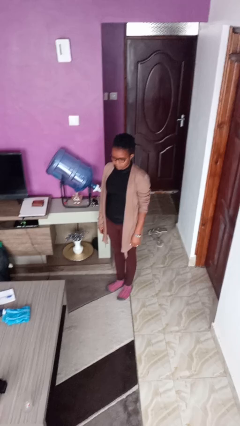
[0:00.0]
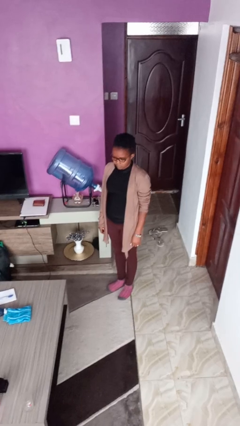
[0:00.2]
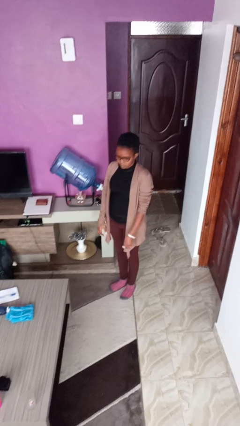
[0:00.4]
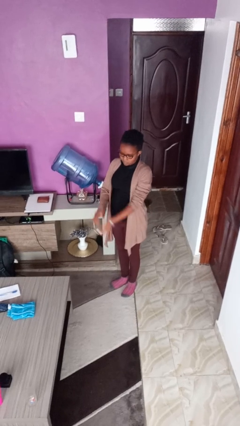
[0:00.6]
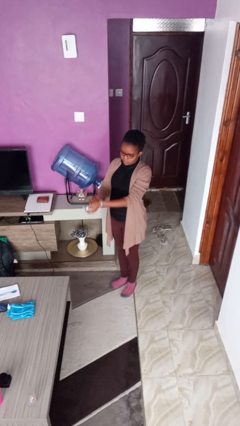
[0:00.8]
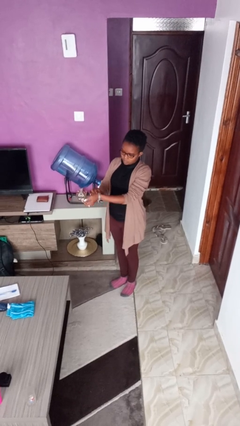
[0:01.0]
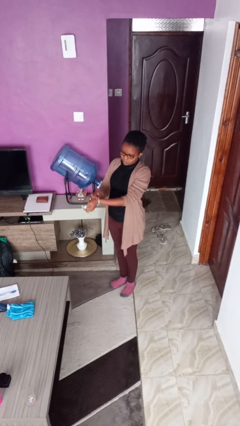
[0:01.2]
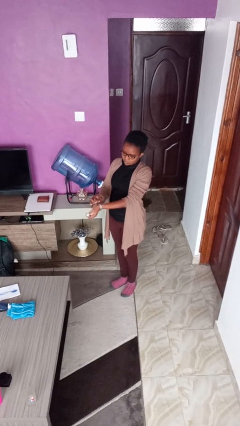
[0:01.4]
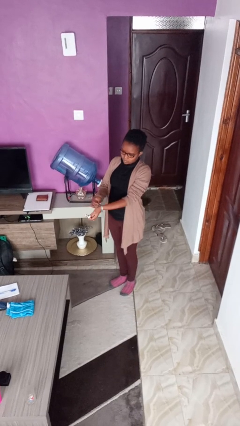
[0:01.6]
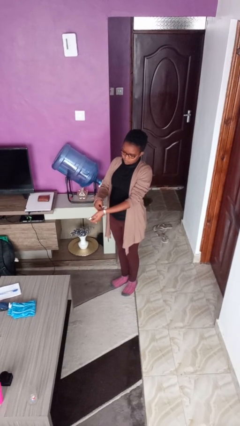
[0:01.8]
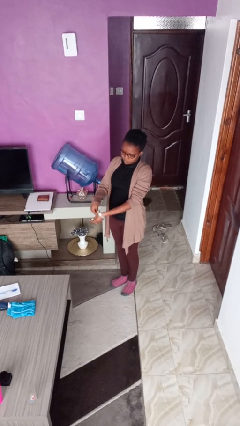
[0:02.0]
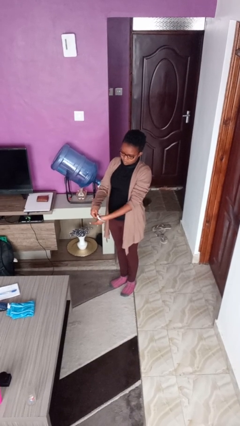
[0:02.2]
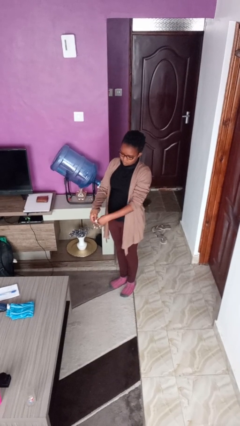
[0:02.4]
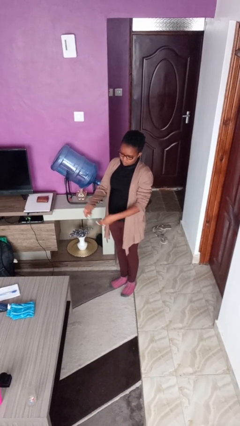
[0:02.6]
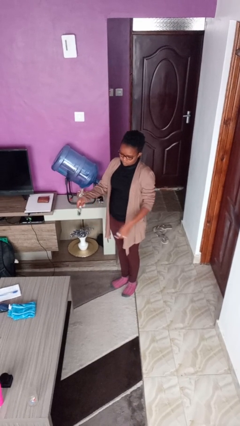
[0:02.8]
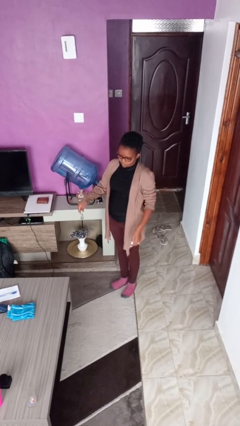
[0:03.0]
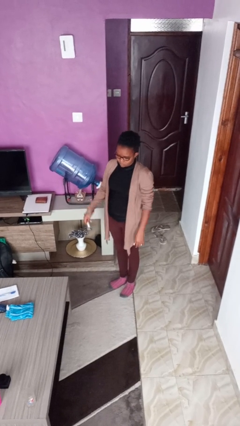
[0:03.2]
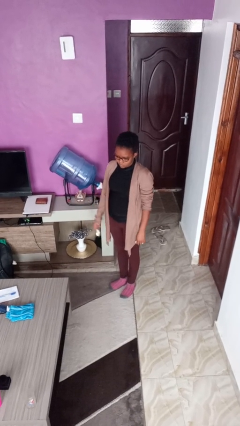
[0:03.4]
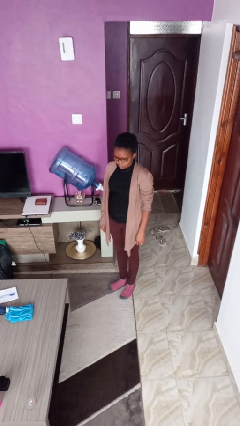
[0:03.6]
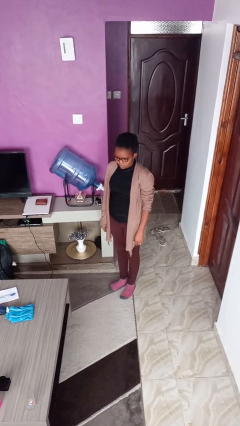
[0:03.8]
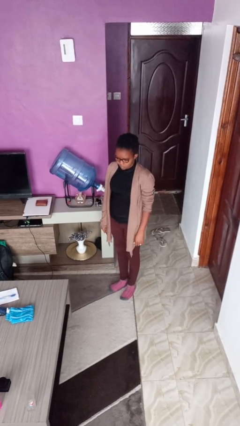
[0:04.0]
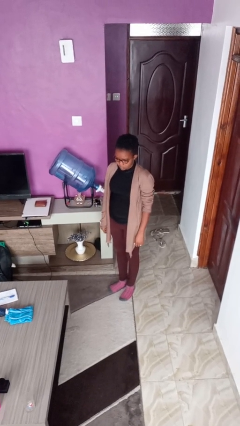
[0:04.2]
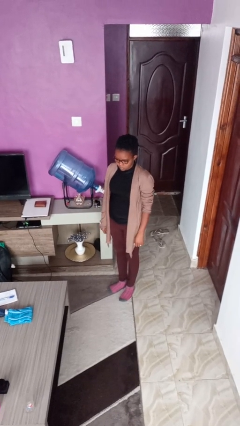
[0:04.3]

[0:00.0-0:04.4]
person takes off wristwatch

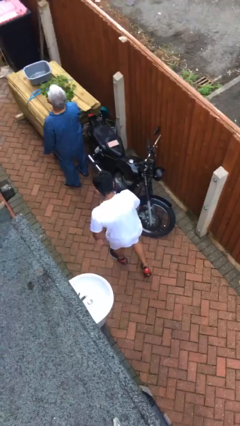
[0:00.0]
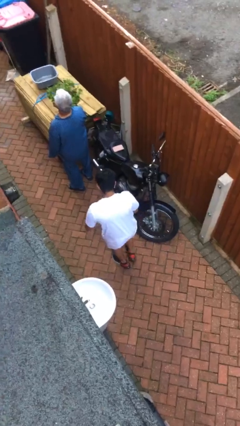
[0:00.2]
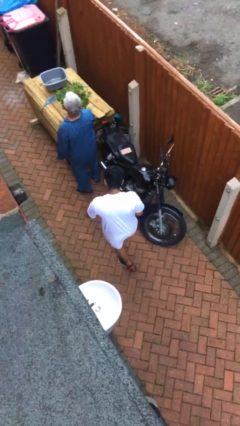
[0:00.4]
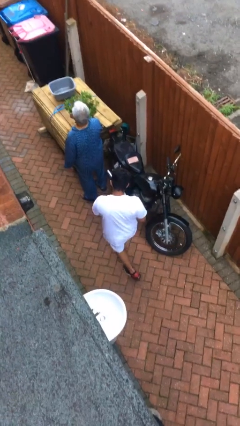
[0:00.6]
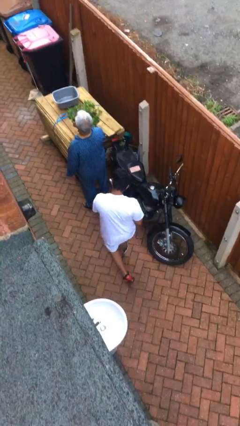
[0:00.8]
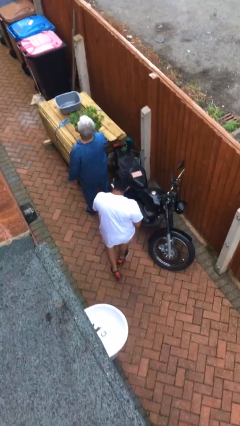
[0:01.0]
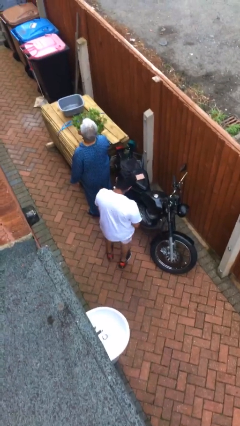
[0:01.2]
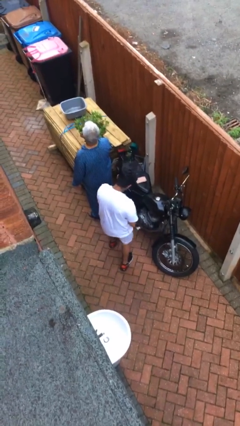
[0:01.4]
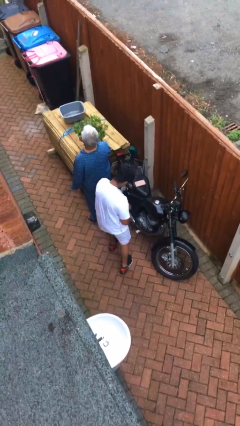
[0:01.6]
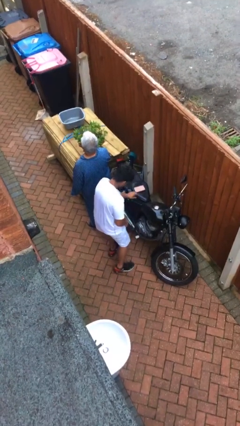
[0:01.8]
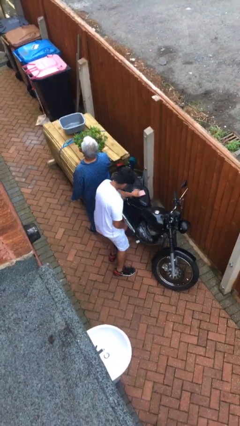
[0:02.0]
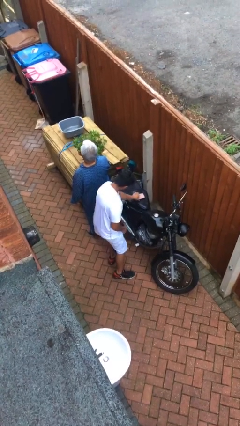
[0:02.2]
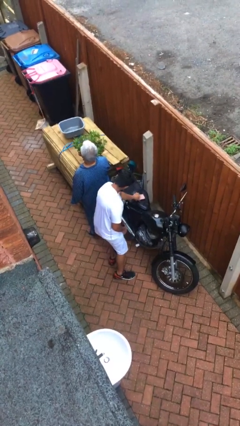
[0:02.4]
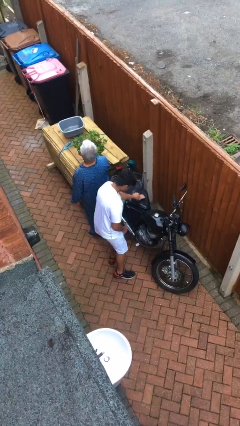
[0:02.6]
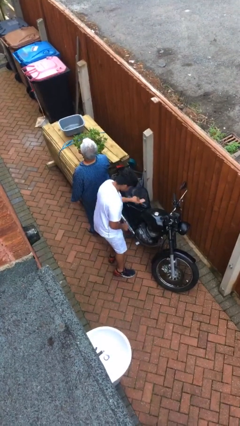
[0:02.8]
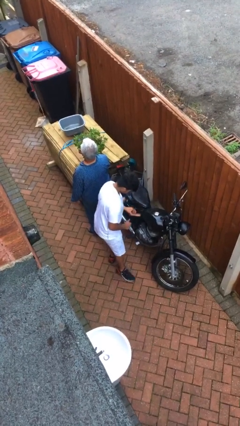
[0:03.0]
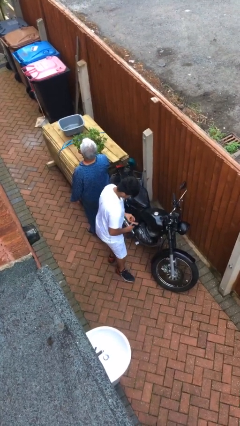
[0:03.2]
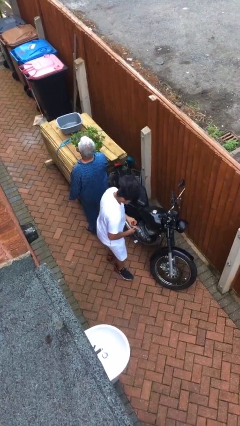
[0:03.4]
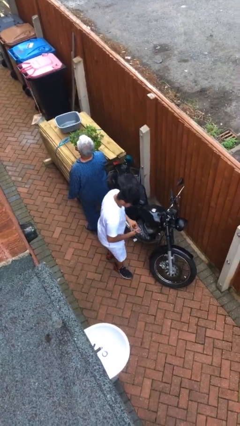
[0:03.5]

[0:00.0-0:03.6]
person steals object from person

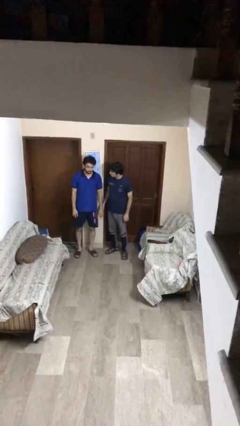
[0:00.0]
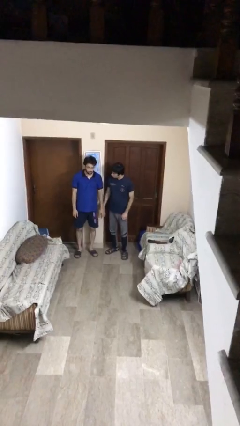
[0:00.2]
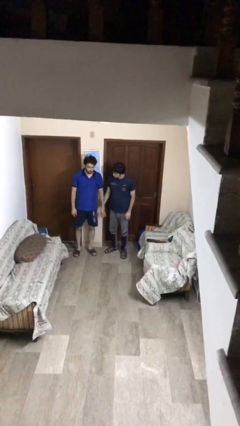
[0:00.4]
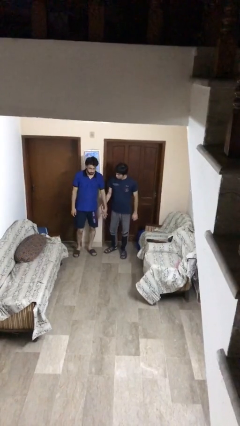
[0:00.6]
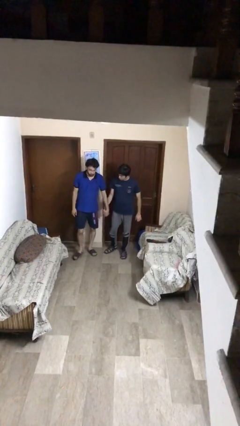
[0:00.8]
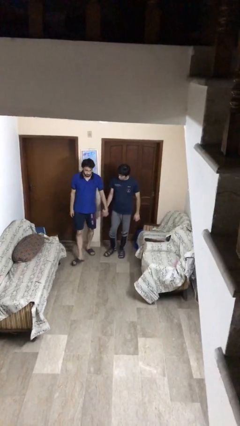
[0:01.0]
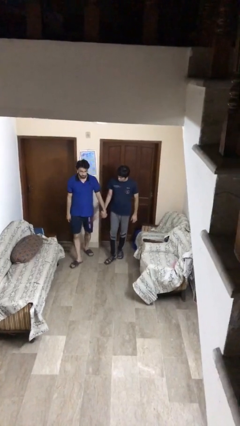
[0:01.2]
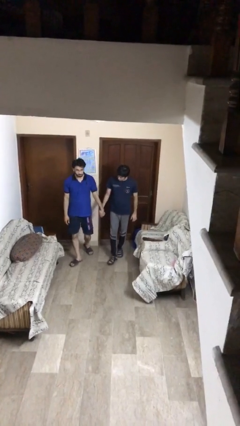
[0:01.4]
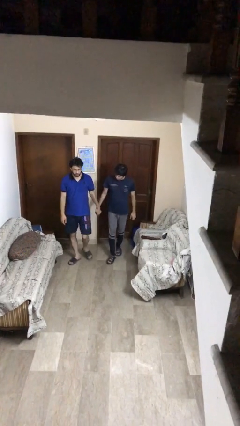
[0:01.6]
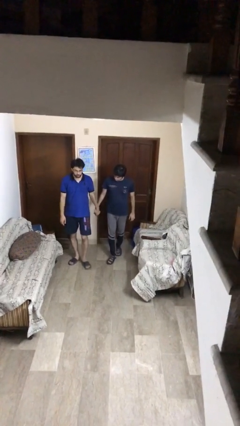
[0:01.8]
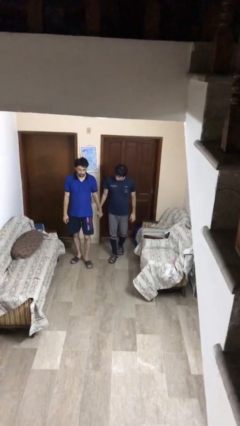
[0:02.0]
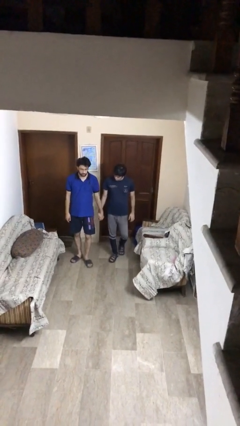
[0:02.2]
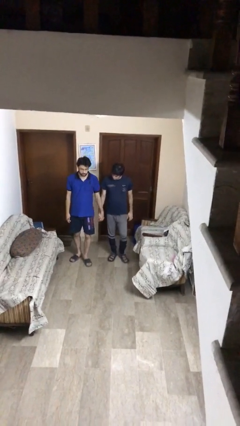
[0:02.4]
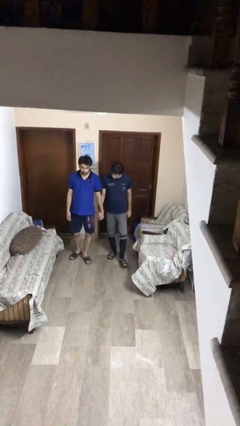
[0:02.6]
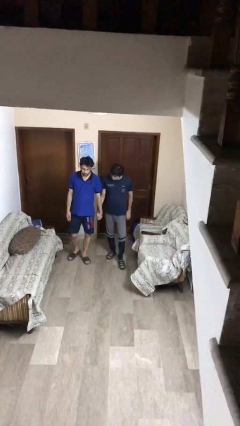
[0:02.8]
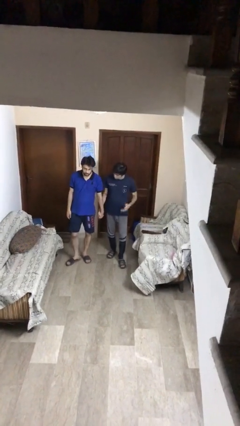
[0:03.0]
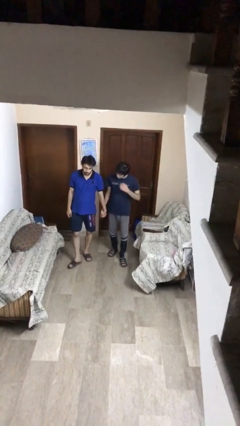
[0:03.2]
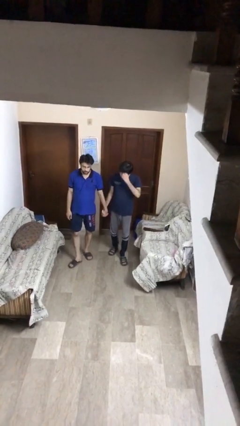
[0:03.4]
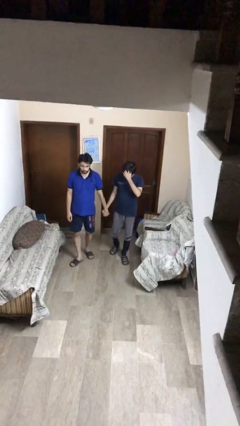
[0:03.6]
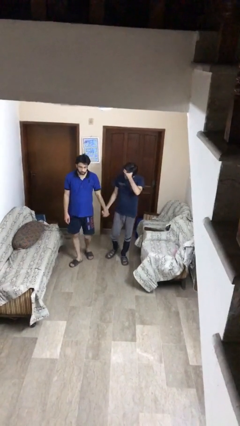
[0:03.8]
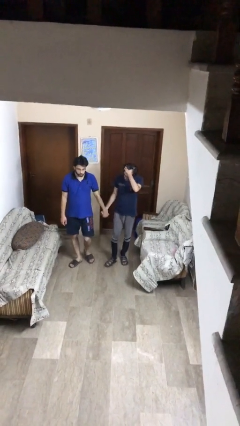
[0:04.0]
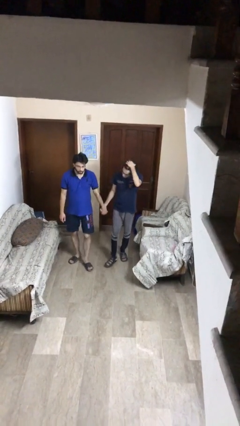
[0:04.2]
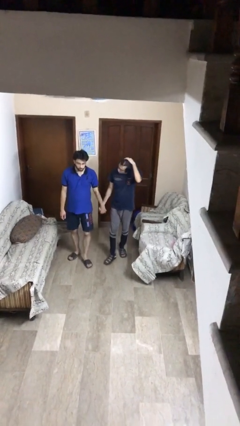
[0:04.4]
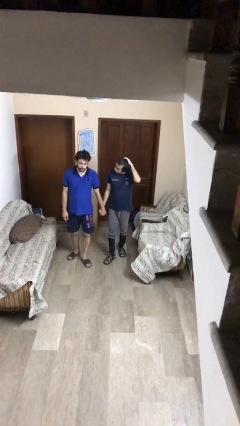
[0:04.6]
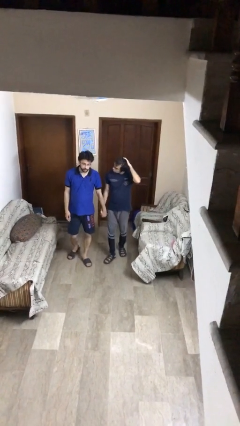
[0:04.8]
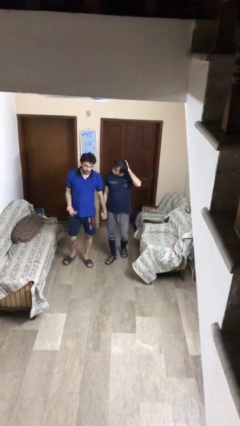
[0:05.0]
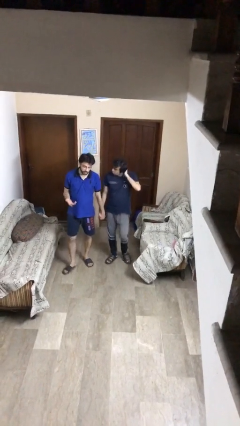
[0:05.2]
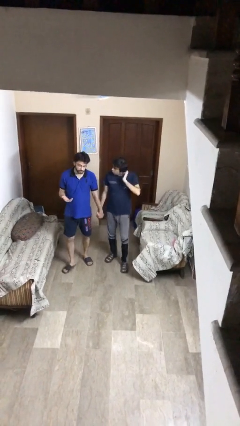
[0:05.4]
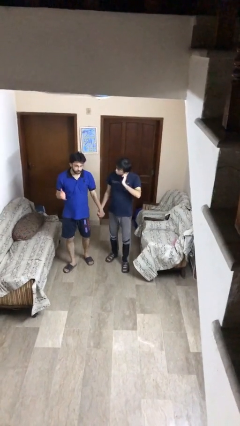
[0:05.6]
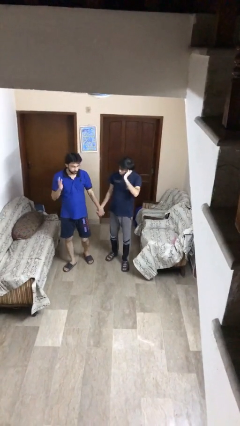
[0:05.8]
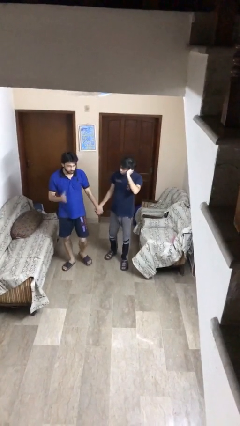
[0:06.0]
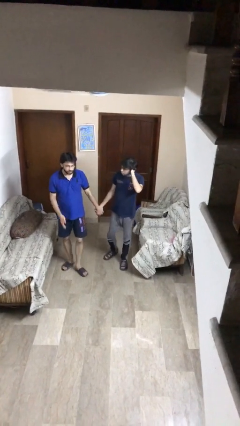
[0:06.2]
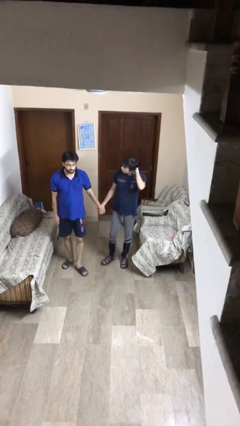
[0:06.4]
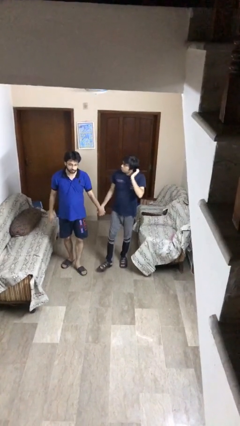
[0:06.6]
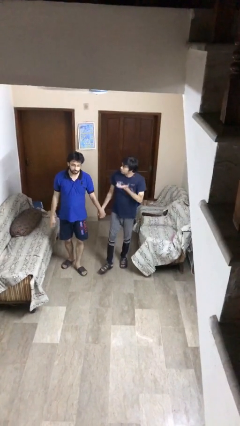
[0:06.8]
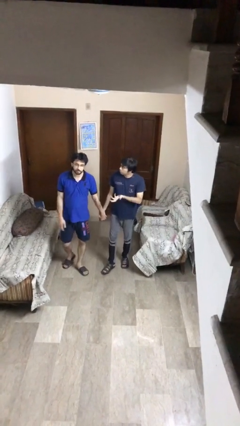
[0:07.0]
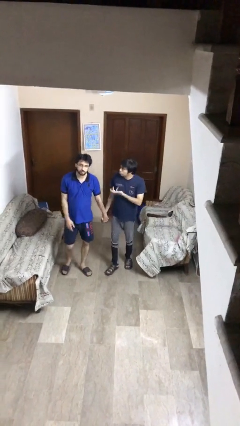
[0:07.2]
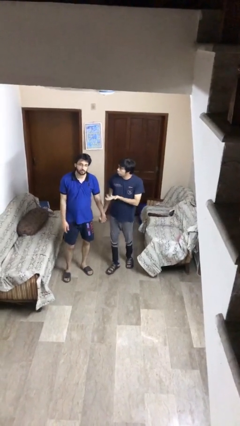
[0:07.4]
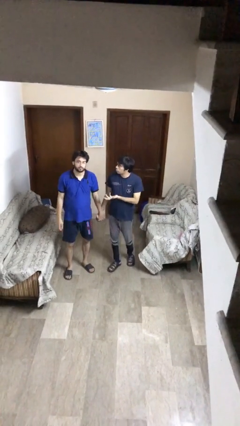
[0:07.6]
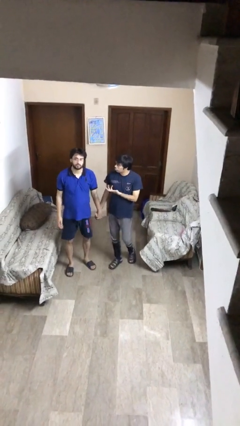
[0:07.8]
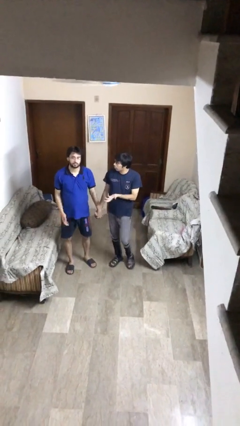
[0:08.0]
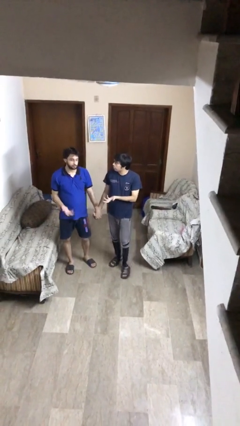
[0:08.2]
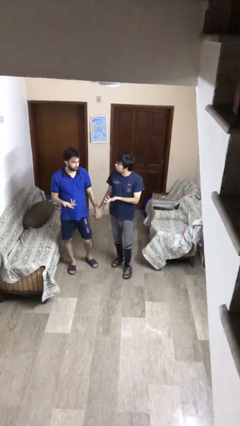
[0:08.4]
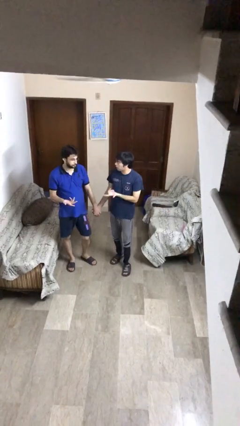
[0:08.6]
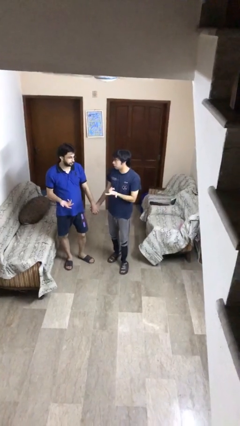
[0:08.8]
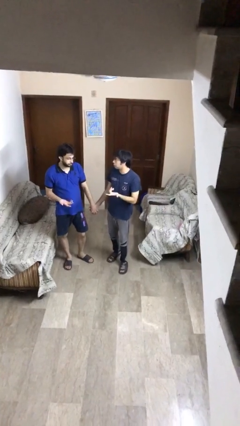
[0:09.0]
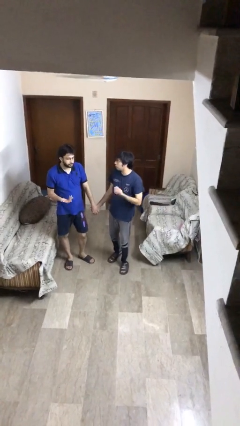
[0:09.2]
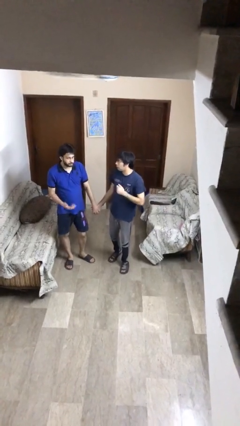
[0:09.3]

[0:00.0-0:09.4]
person holds hand

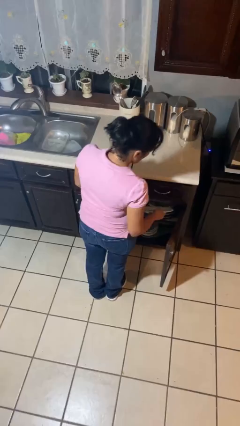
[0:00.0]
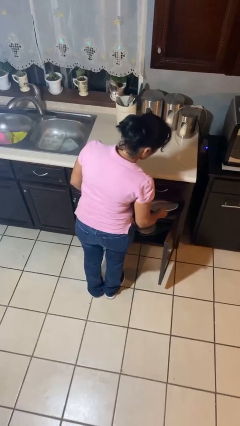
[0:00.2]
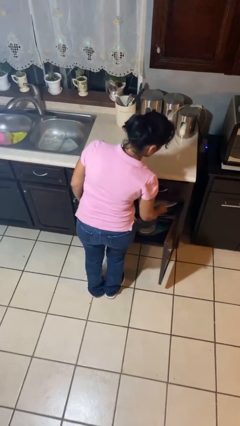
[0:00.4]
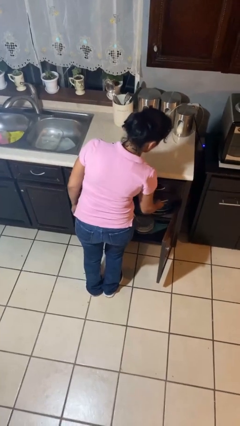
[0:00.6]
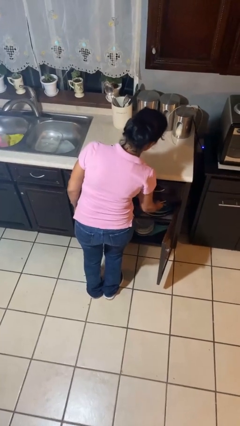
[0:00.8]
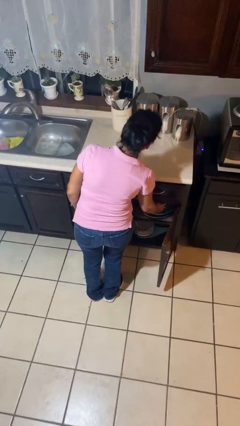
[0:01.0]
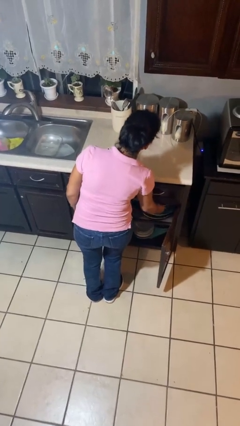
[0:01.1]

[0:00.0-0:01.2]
person takes object from cabinet
